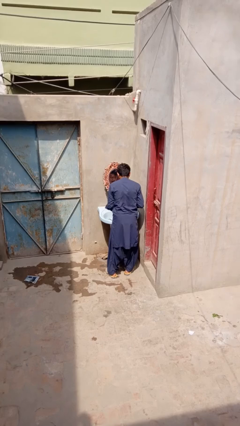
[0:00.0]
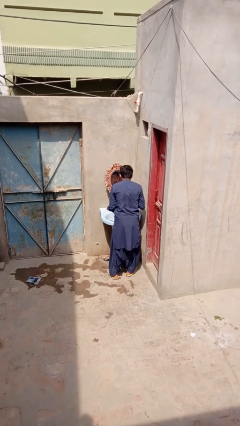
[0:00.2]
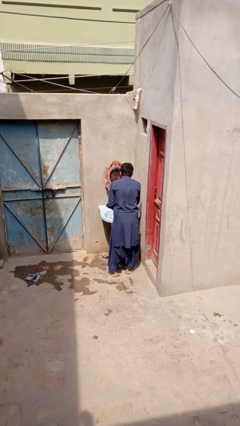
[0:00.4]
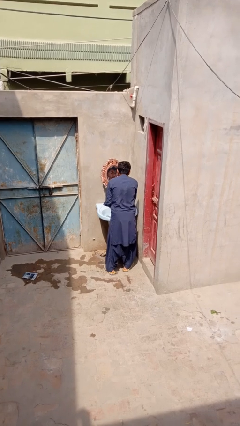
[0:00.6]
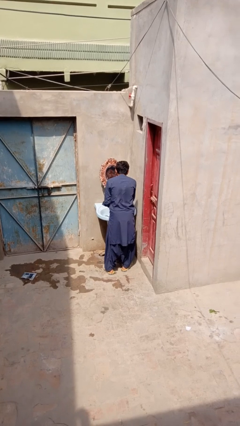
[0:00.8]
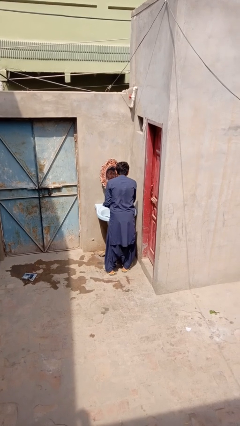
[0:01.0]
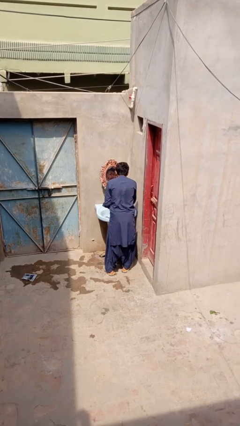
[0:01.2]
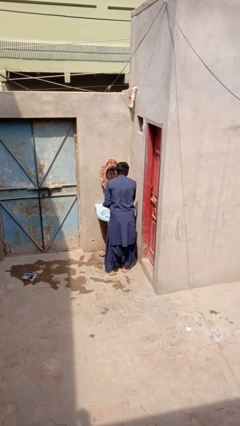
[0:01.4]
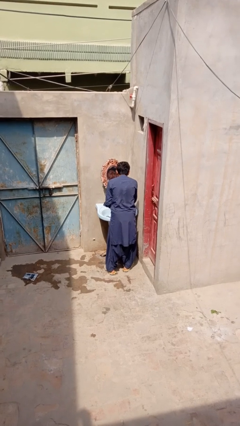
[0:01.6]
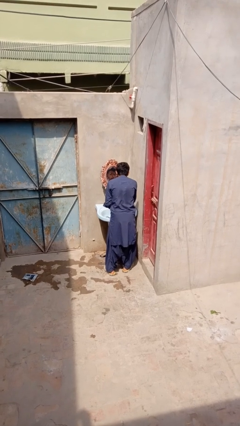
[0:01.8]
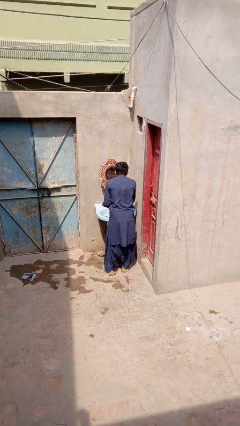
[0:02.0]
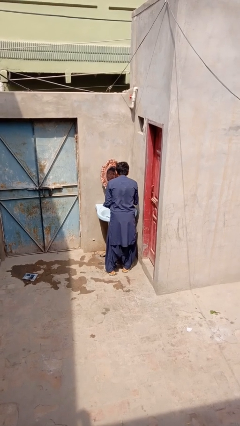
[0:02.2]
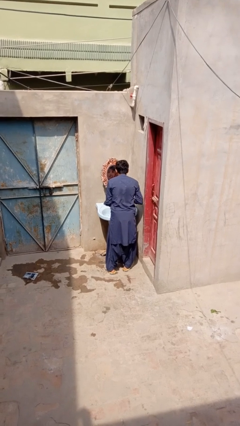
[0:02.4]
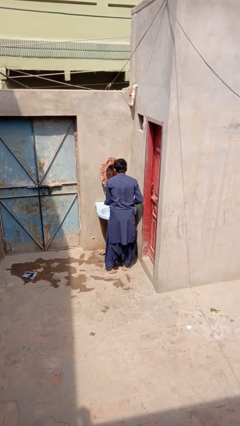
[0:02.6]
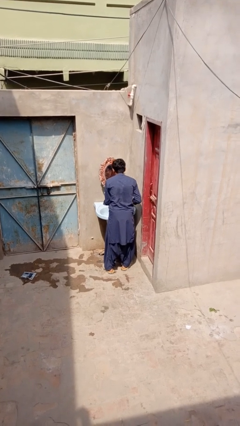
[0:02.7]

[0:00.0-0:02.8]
person shaves face

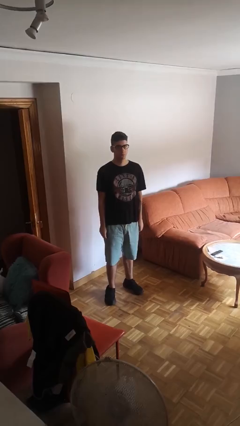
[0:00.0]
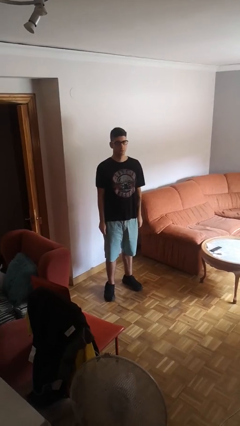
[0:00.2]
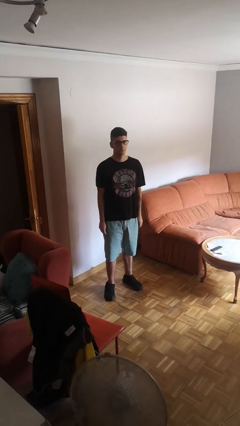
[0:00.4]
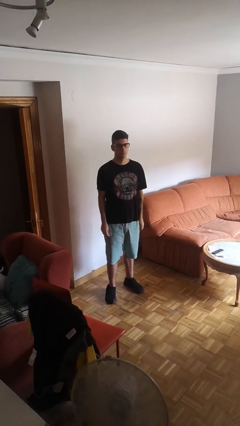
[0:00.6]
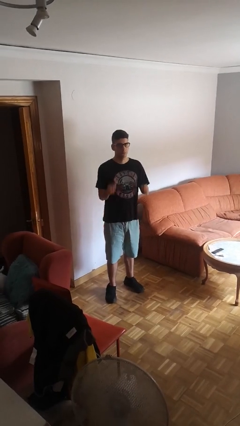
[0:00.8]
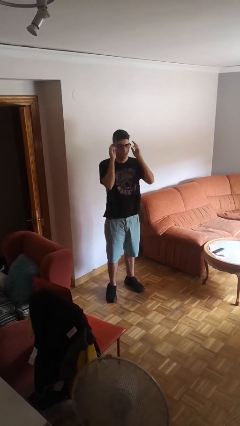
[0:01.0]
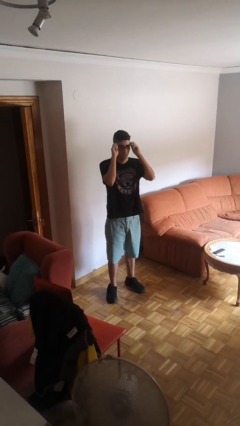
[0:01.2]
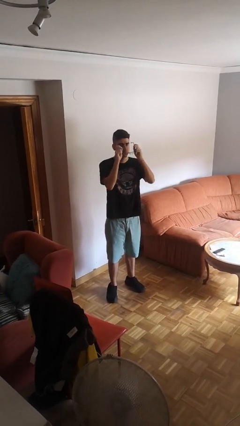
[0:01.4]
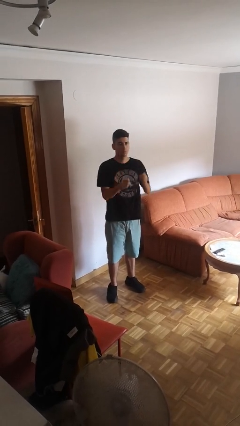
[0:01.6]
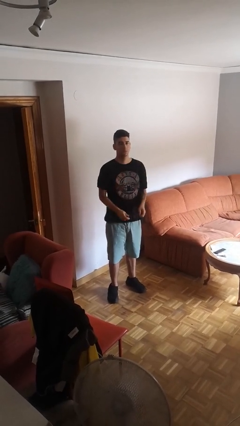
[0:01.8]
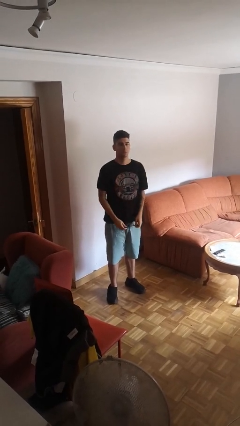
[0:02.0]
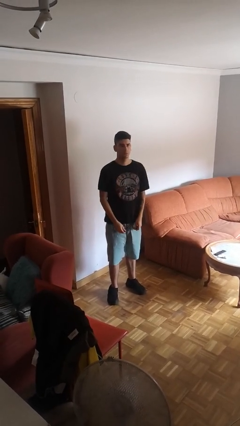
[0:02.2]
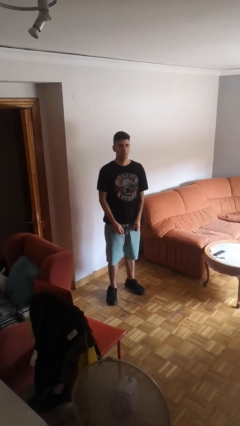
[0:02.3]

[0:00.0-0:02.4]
person takes off glasses

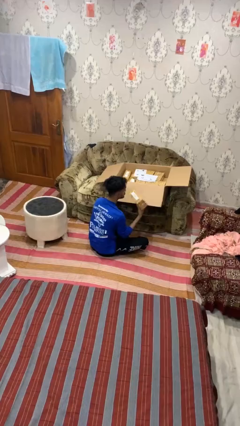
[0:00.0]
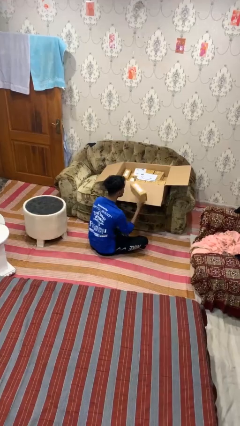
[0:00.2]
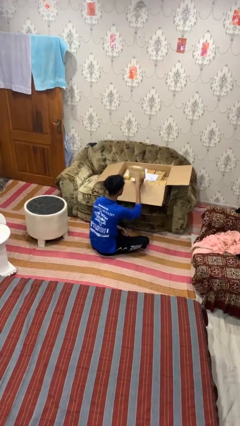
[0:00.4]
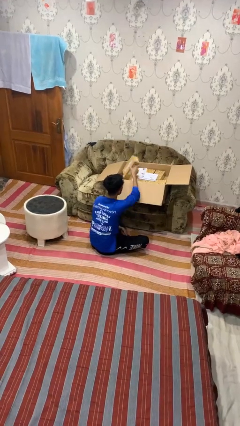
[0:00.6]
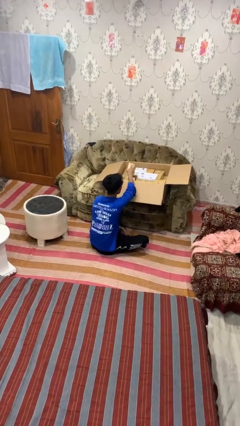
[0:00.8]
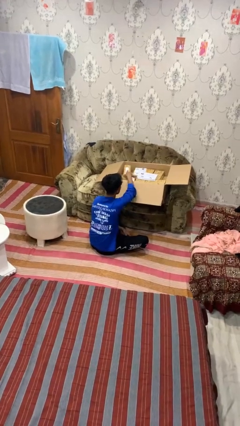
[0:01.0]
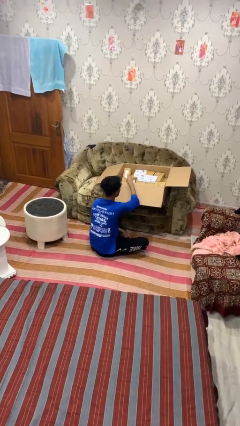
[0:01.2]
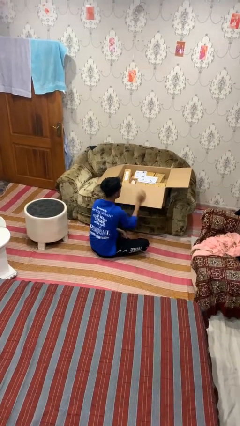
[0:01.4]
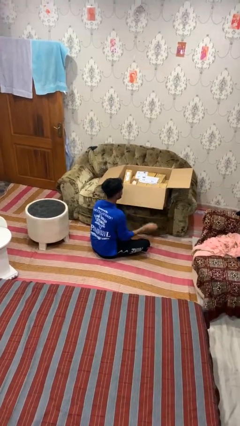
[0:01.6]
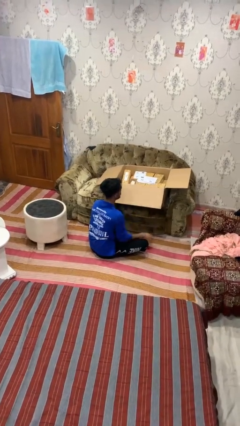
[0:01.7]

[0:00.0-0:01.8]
person puts object into box

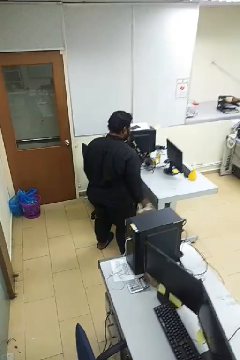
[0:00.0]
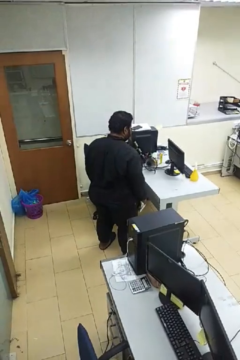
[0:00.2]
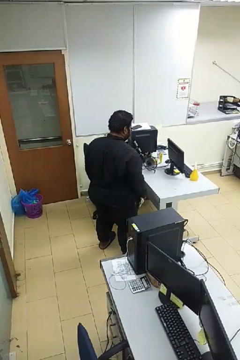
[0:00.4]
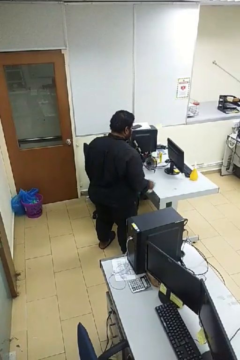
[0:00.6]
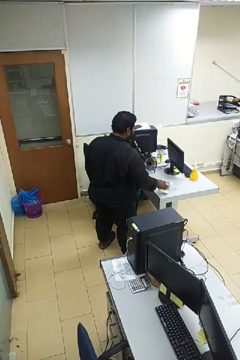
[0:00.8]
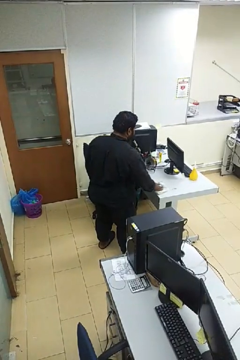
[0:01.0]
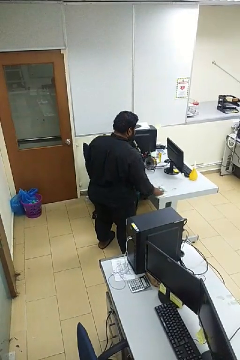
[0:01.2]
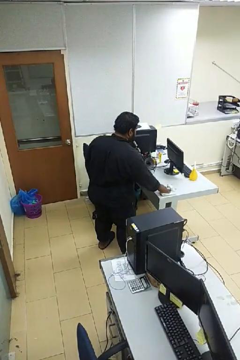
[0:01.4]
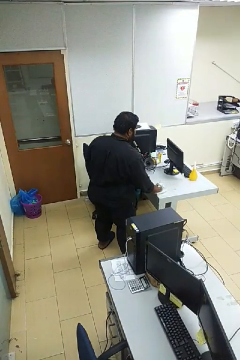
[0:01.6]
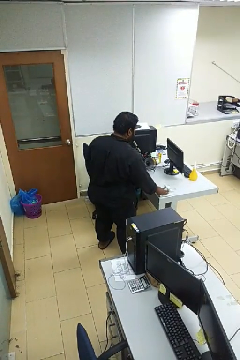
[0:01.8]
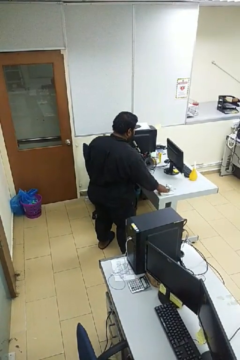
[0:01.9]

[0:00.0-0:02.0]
person cleans table with rag

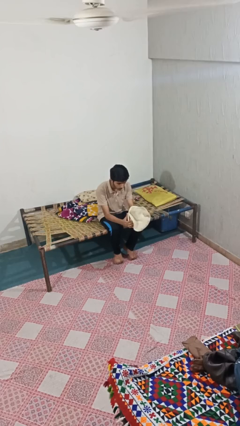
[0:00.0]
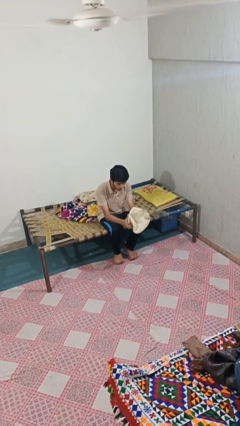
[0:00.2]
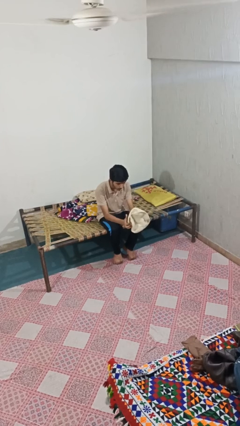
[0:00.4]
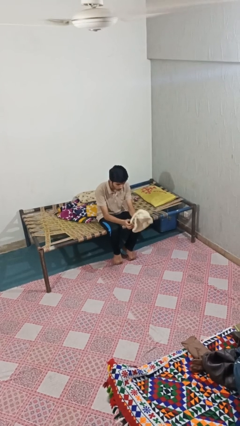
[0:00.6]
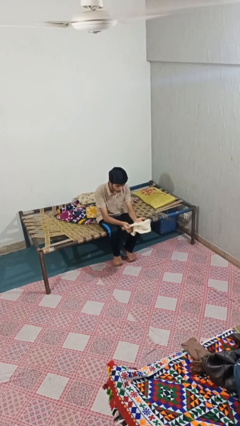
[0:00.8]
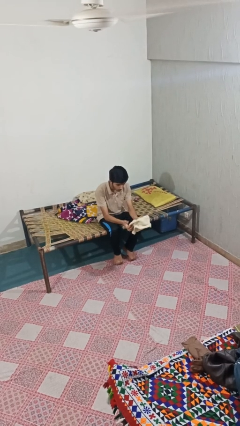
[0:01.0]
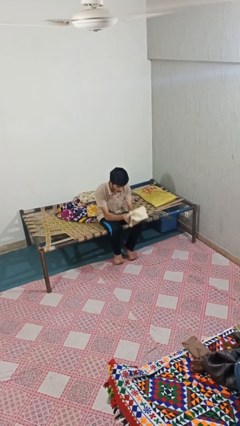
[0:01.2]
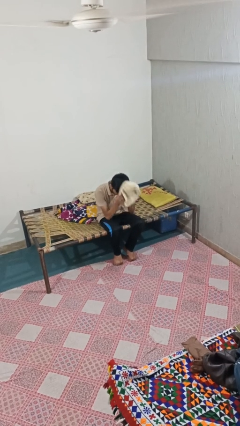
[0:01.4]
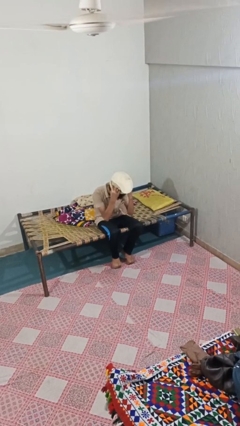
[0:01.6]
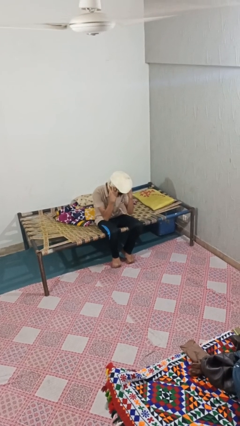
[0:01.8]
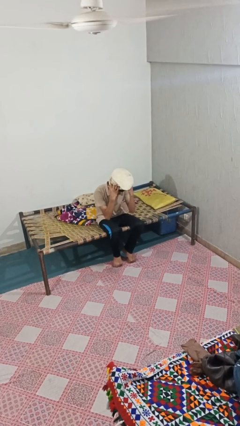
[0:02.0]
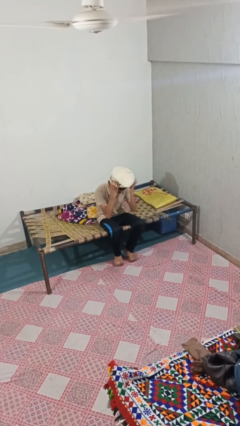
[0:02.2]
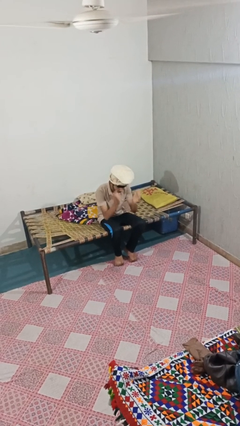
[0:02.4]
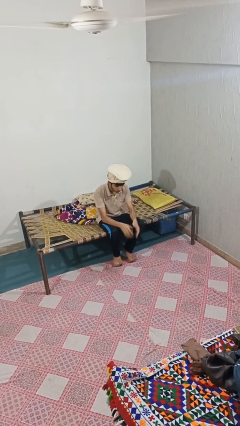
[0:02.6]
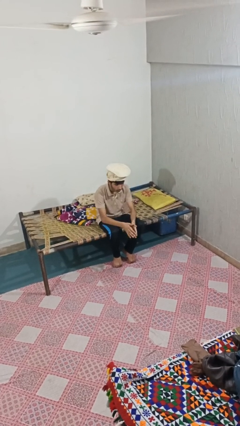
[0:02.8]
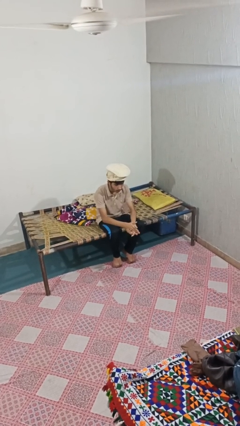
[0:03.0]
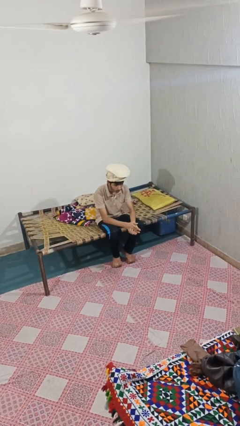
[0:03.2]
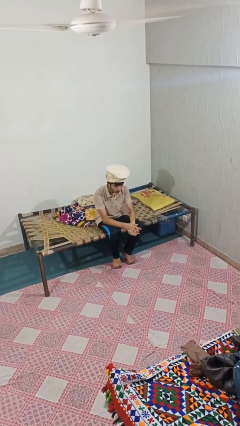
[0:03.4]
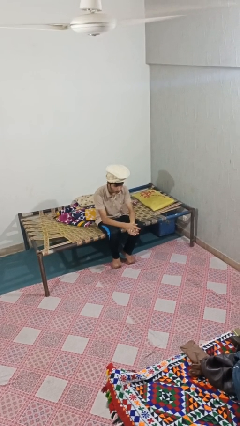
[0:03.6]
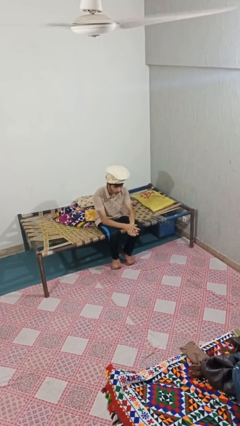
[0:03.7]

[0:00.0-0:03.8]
person puts on hat

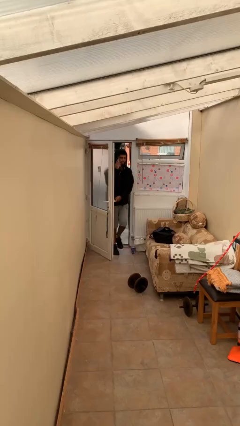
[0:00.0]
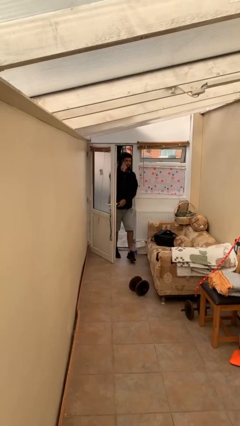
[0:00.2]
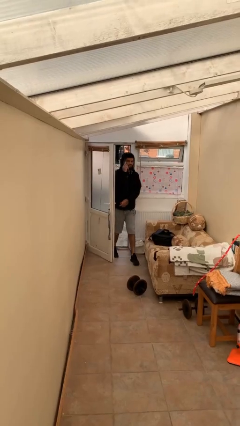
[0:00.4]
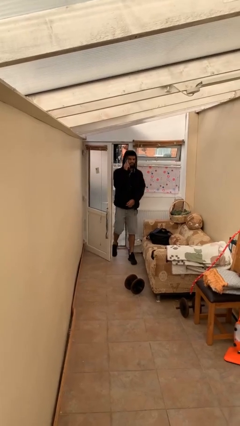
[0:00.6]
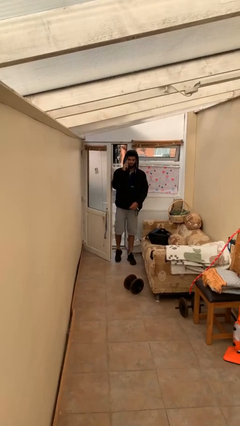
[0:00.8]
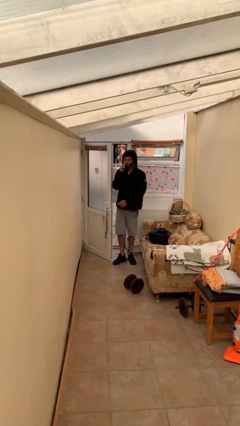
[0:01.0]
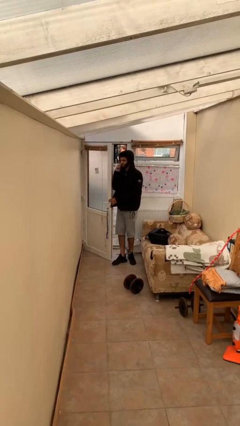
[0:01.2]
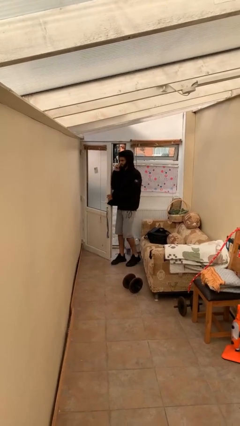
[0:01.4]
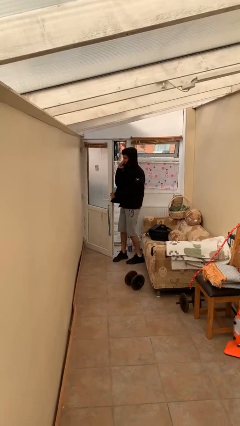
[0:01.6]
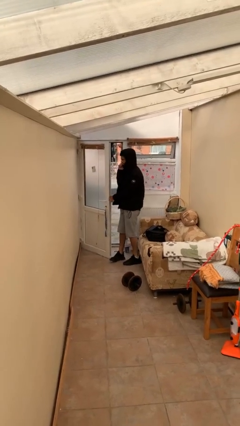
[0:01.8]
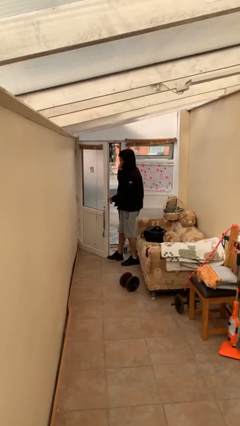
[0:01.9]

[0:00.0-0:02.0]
person enters scene through structure

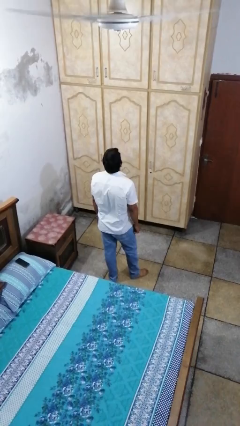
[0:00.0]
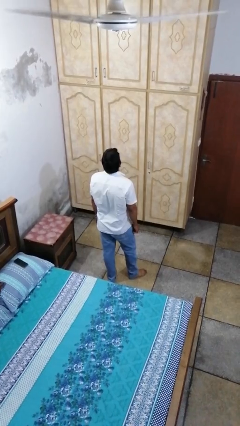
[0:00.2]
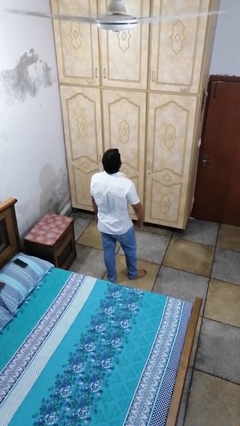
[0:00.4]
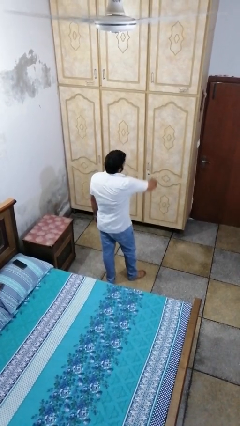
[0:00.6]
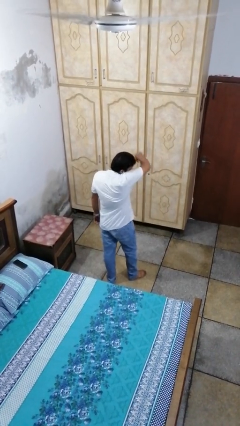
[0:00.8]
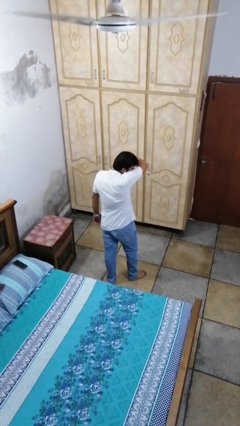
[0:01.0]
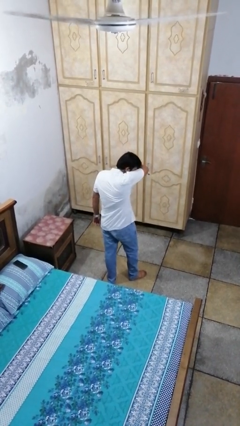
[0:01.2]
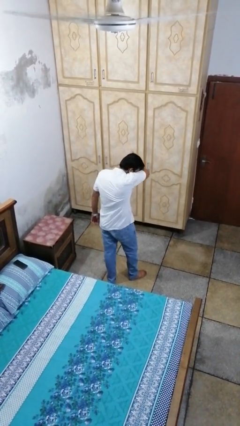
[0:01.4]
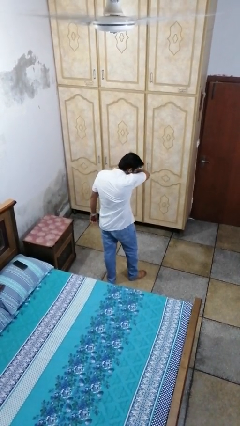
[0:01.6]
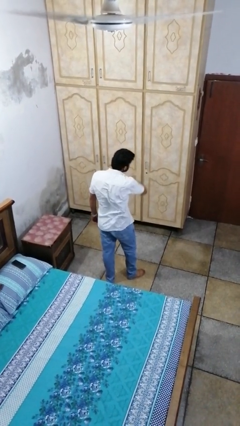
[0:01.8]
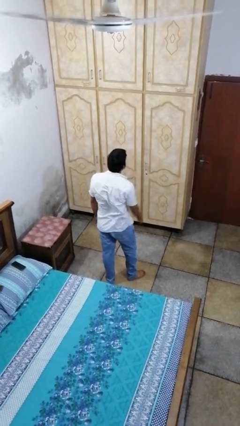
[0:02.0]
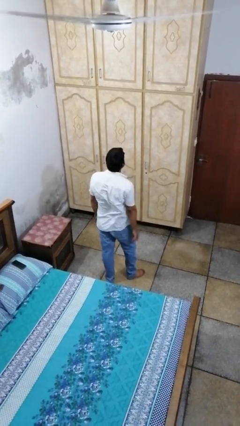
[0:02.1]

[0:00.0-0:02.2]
person sneezes into arm

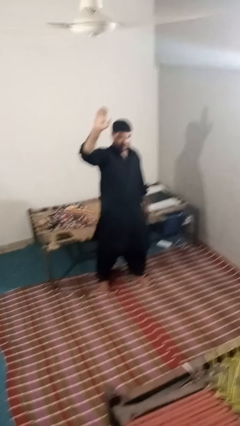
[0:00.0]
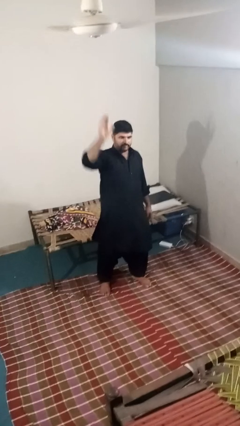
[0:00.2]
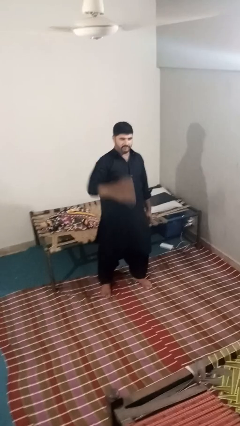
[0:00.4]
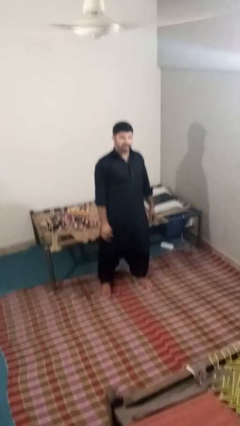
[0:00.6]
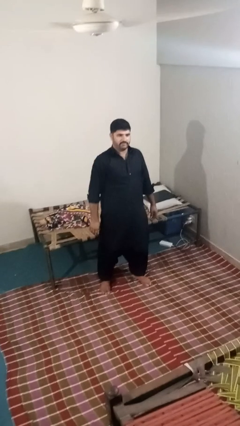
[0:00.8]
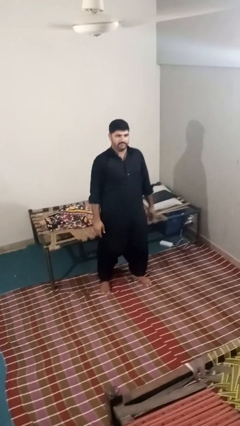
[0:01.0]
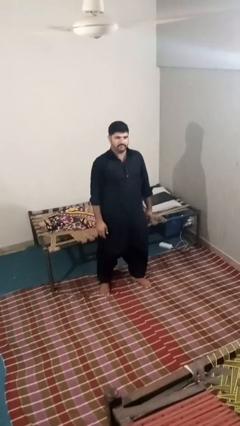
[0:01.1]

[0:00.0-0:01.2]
person gestures lower hand
